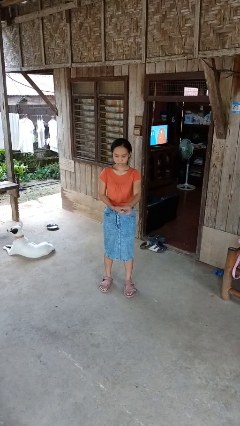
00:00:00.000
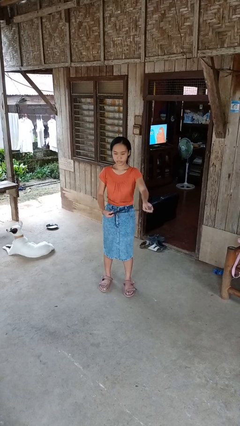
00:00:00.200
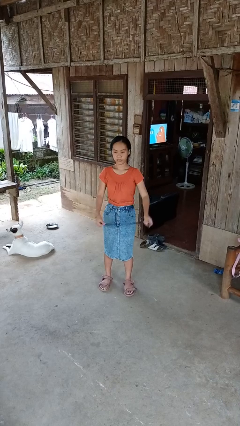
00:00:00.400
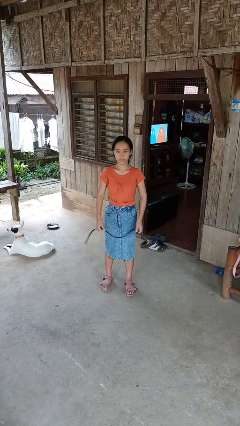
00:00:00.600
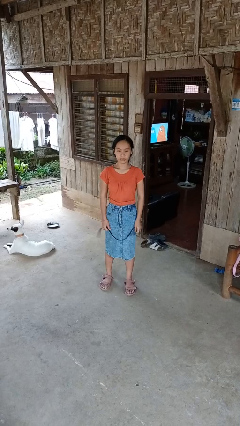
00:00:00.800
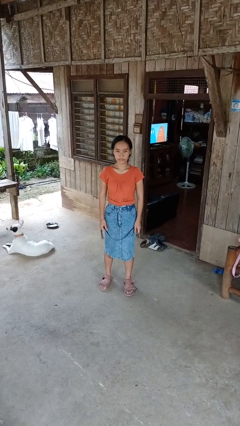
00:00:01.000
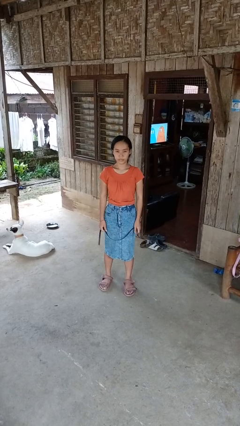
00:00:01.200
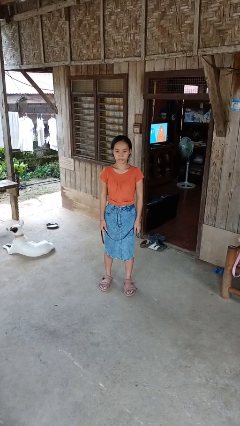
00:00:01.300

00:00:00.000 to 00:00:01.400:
person takes off belt

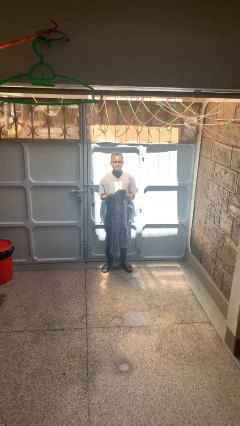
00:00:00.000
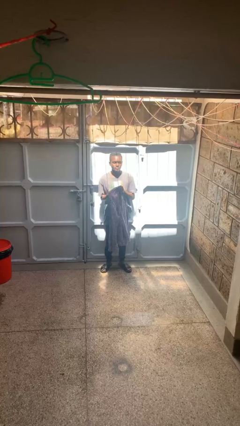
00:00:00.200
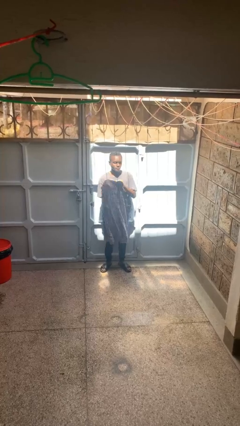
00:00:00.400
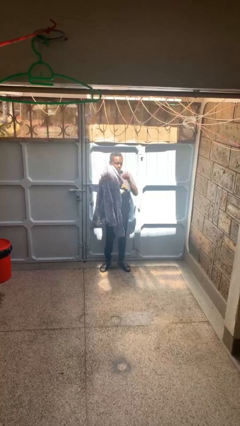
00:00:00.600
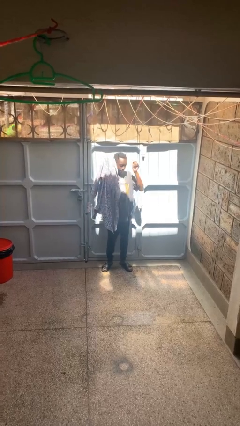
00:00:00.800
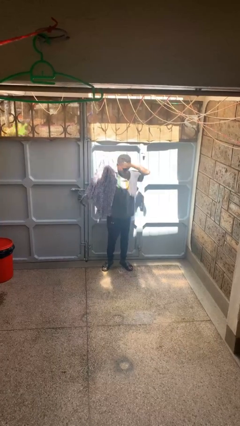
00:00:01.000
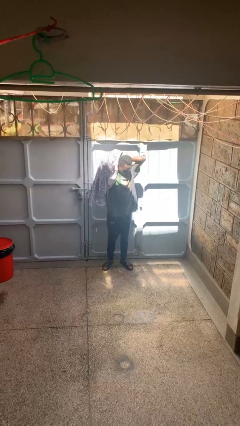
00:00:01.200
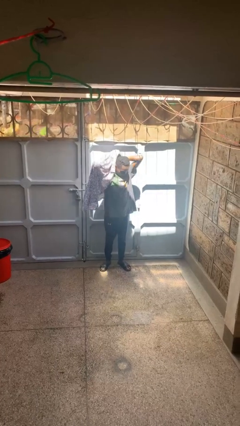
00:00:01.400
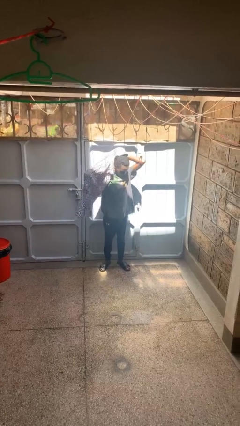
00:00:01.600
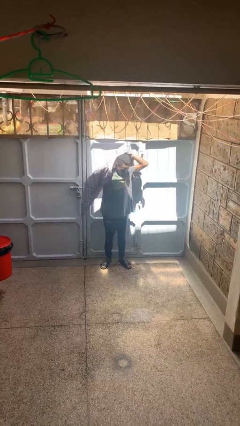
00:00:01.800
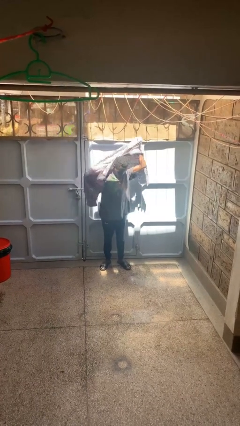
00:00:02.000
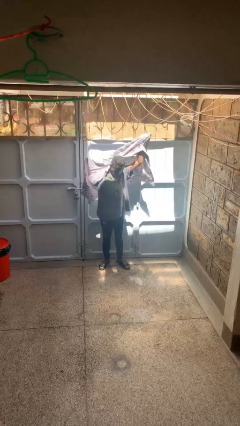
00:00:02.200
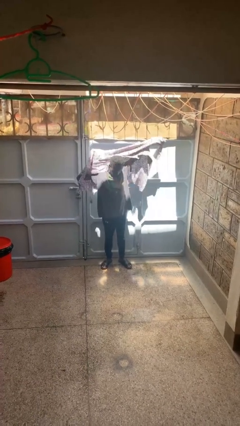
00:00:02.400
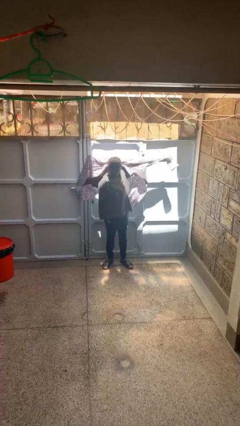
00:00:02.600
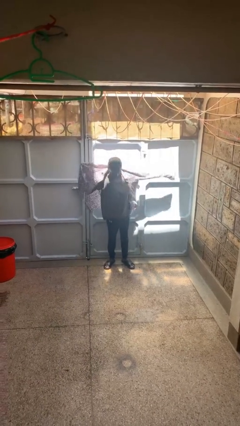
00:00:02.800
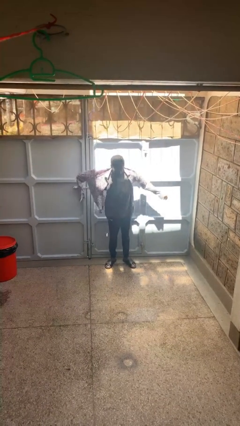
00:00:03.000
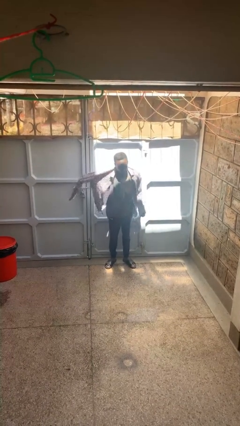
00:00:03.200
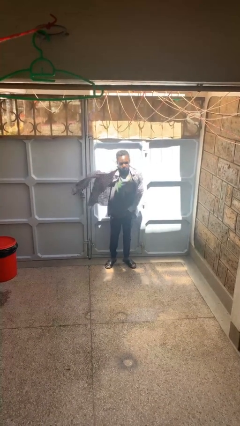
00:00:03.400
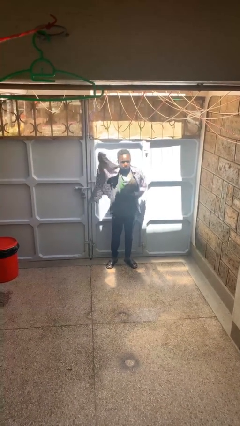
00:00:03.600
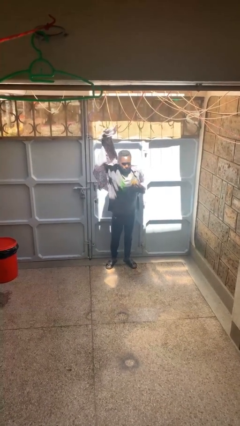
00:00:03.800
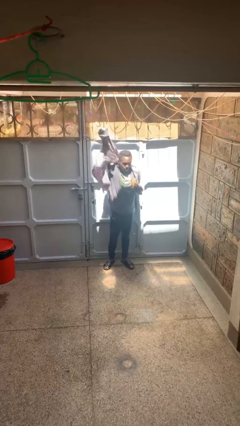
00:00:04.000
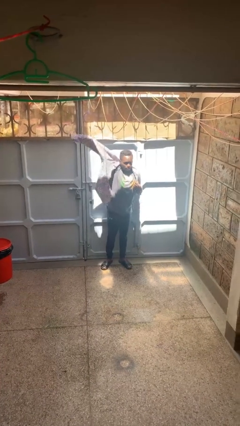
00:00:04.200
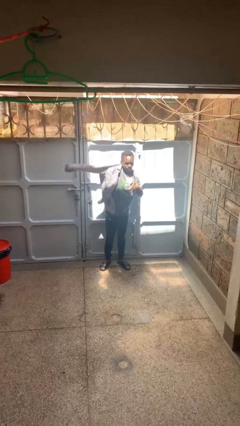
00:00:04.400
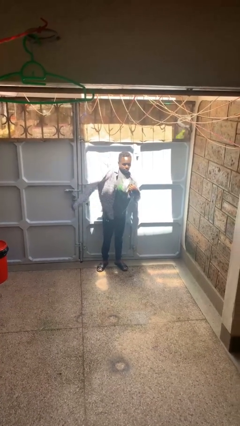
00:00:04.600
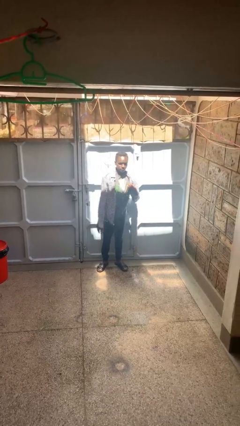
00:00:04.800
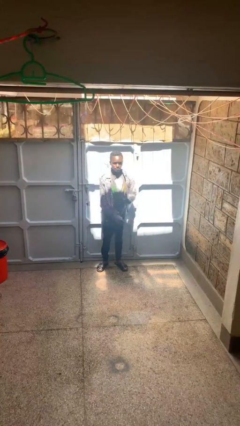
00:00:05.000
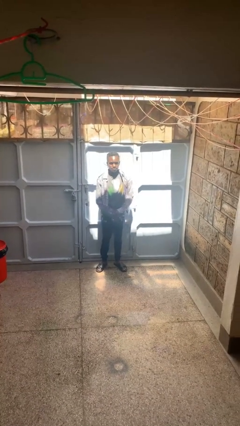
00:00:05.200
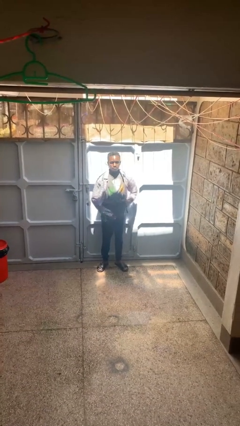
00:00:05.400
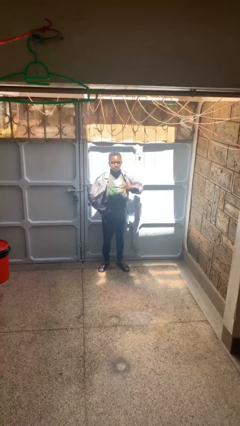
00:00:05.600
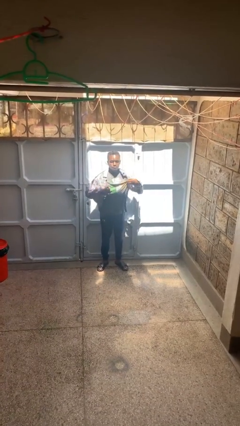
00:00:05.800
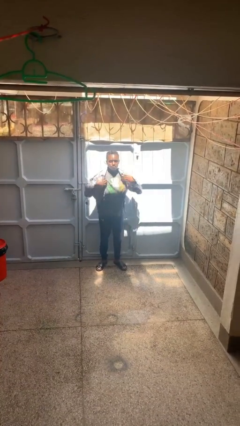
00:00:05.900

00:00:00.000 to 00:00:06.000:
person puts on shirt

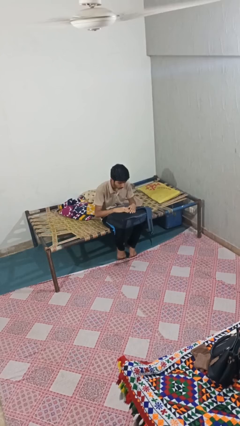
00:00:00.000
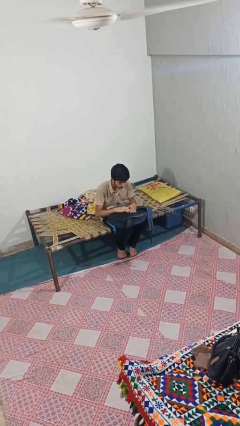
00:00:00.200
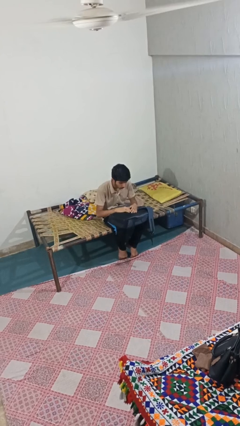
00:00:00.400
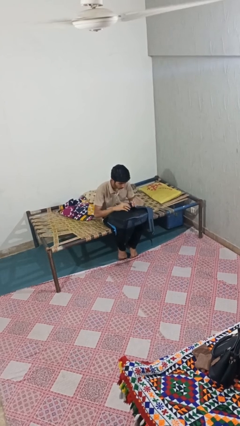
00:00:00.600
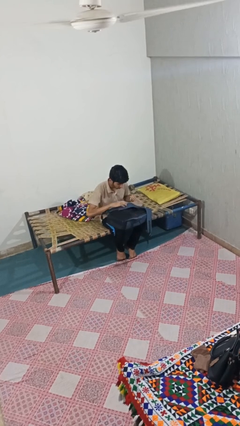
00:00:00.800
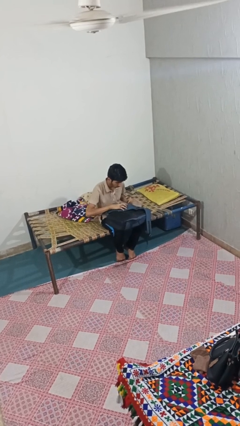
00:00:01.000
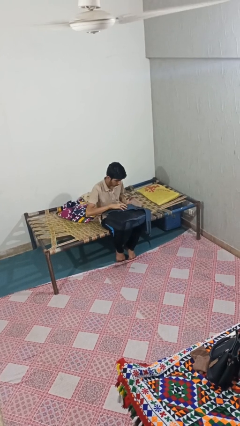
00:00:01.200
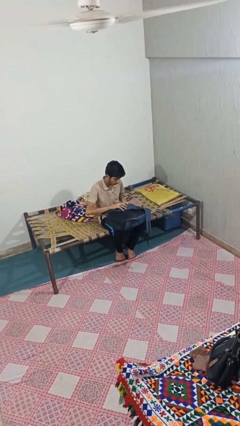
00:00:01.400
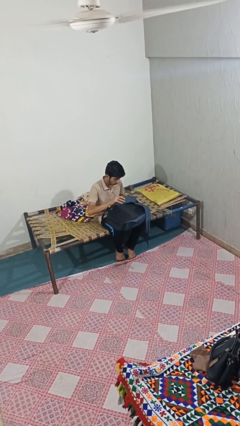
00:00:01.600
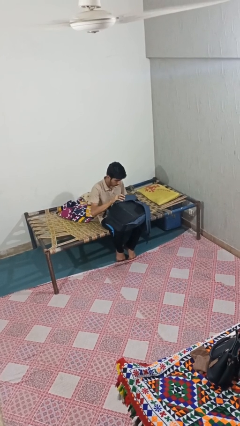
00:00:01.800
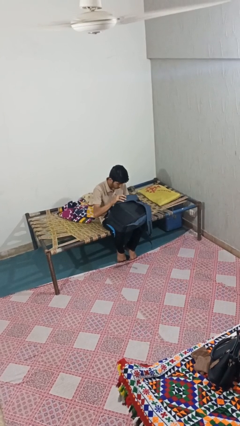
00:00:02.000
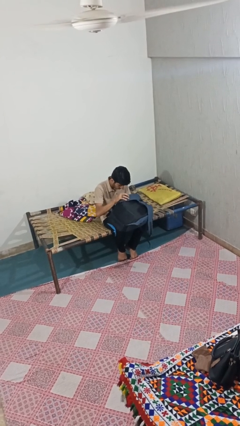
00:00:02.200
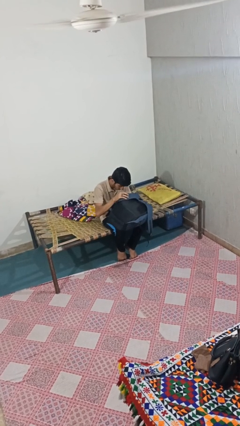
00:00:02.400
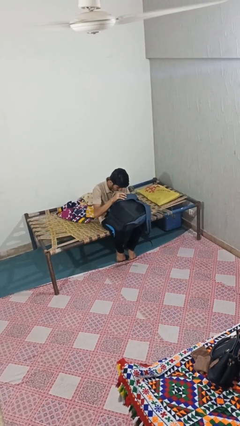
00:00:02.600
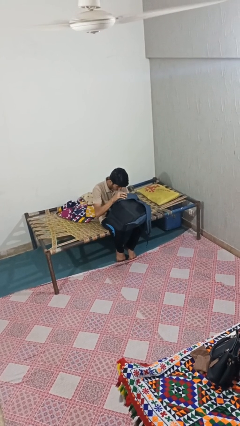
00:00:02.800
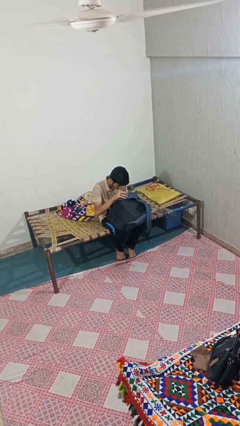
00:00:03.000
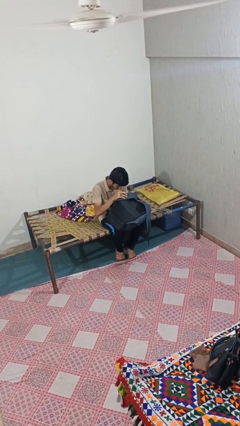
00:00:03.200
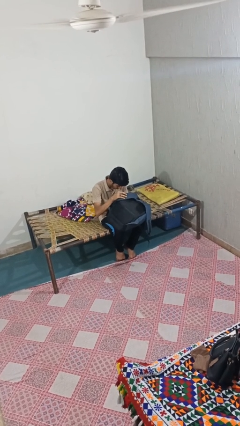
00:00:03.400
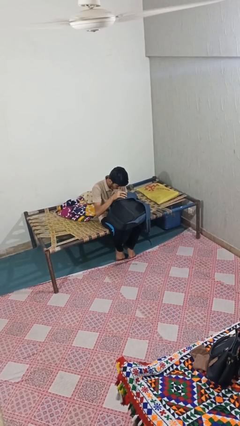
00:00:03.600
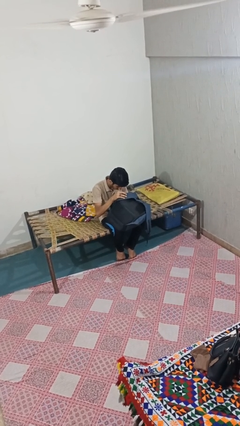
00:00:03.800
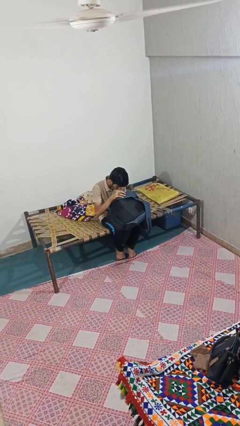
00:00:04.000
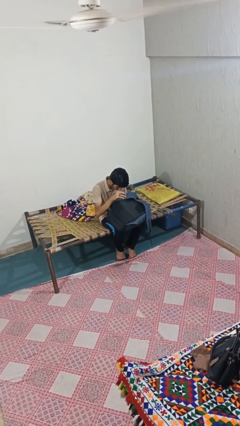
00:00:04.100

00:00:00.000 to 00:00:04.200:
person searches in backpack

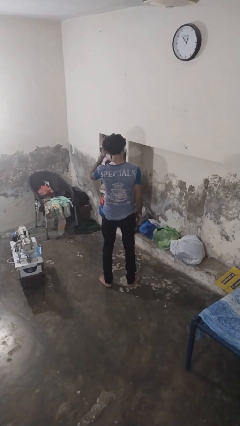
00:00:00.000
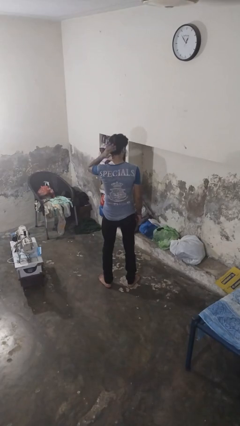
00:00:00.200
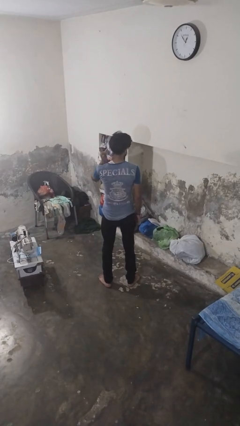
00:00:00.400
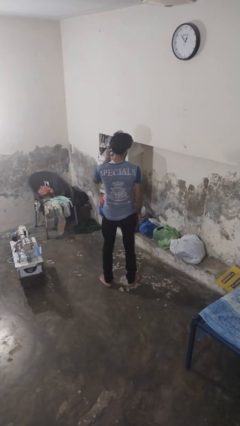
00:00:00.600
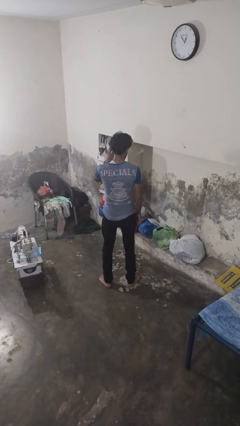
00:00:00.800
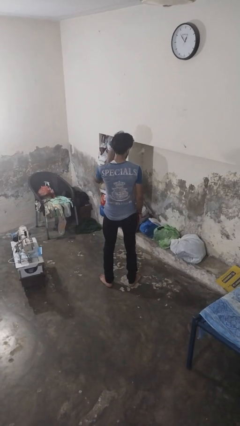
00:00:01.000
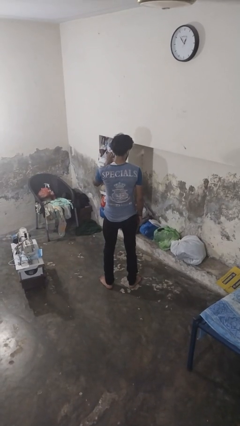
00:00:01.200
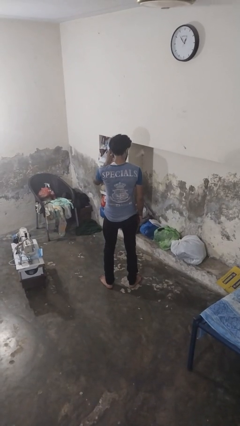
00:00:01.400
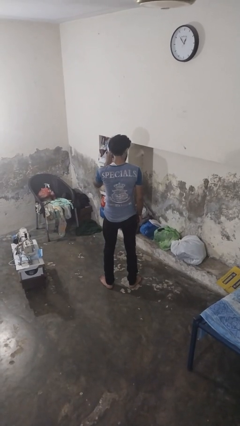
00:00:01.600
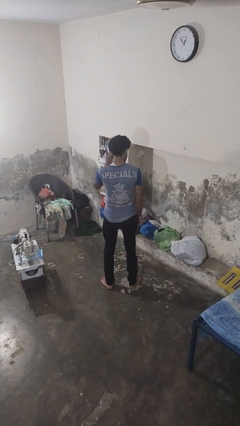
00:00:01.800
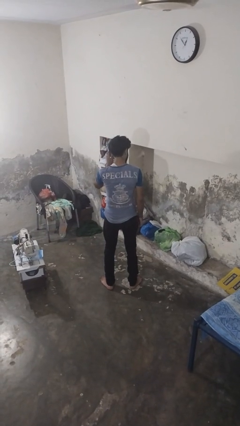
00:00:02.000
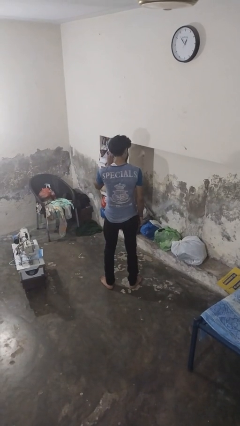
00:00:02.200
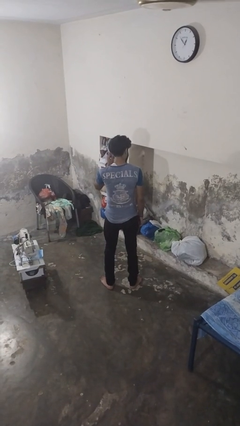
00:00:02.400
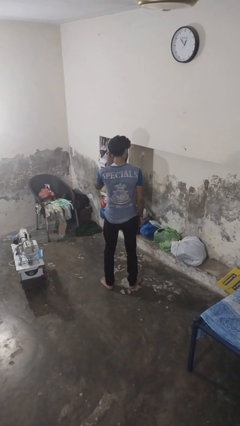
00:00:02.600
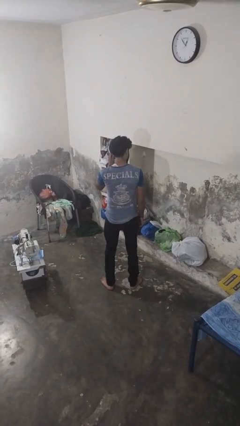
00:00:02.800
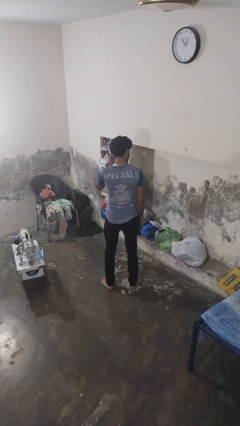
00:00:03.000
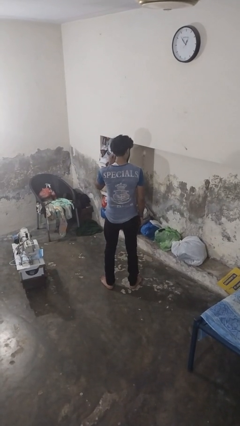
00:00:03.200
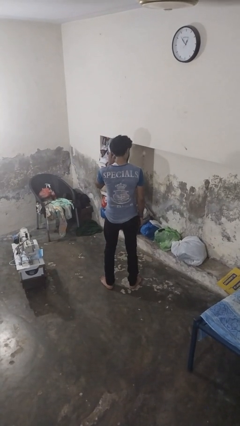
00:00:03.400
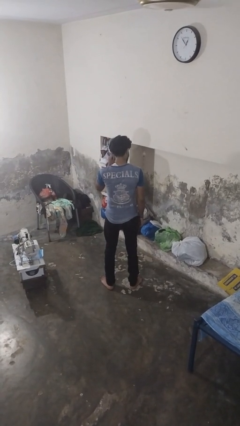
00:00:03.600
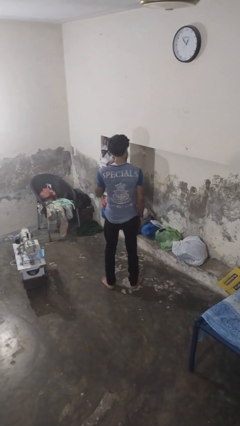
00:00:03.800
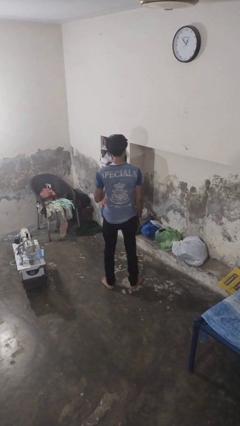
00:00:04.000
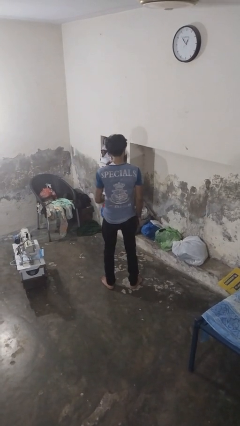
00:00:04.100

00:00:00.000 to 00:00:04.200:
person touches earlobe

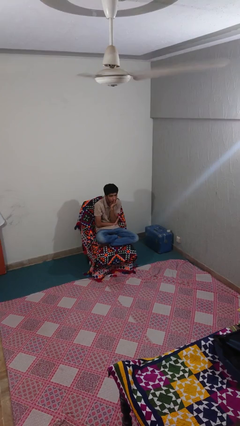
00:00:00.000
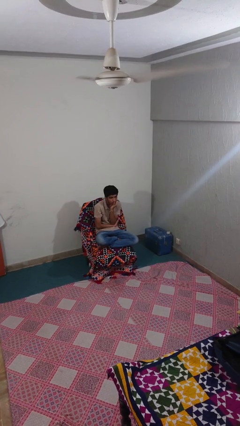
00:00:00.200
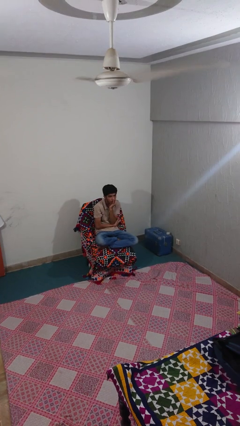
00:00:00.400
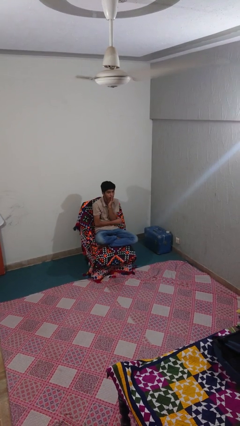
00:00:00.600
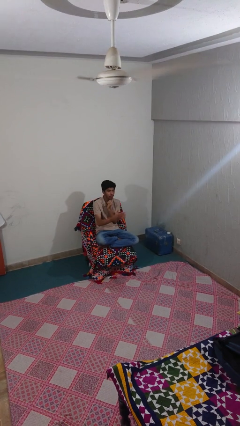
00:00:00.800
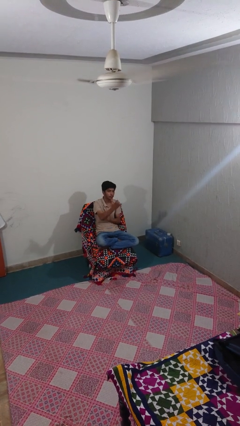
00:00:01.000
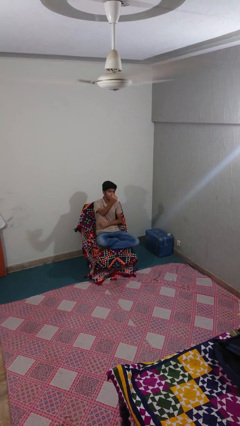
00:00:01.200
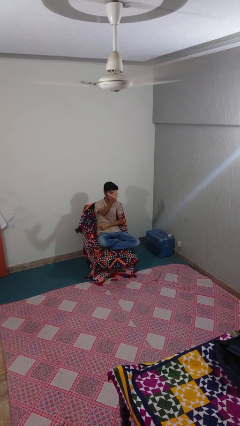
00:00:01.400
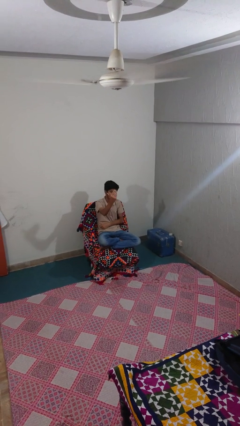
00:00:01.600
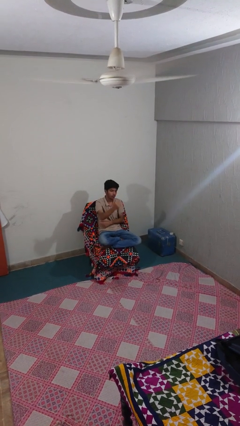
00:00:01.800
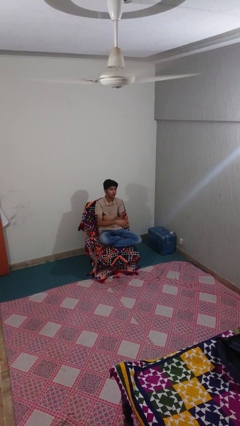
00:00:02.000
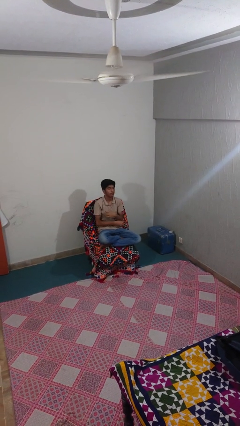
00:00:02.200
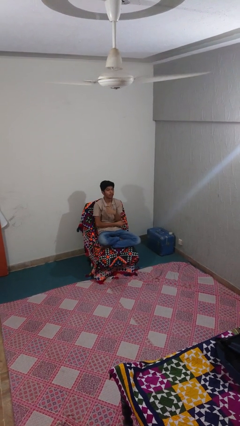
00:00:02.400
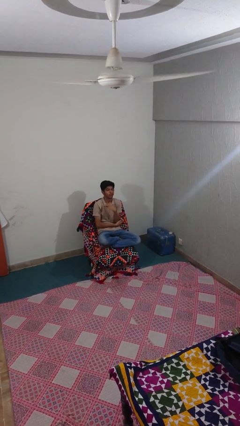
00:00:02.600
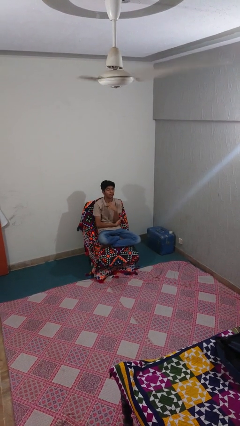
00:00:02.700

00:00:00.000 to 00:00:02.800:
person gestures come here
